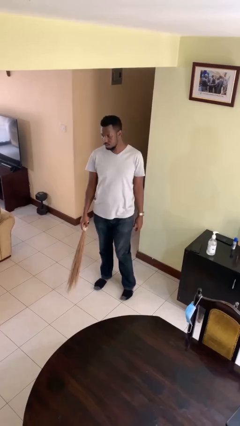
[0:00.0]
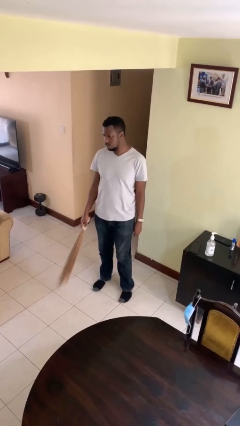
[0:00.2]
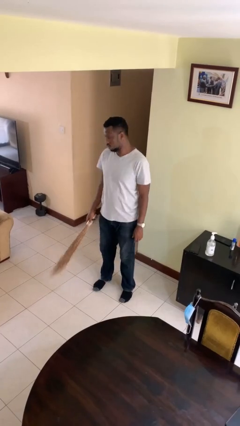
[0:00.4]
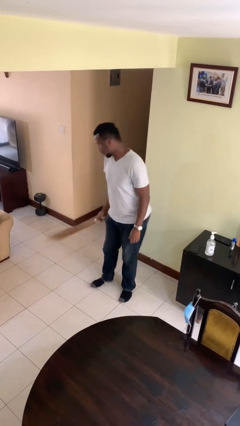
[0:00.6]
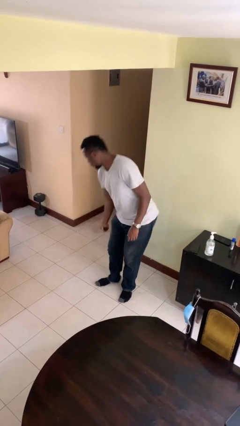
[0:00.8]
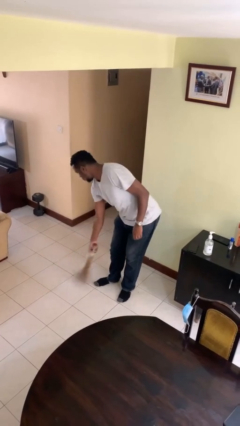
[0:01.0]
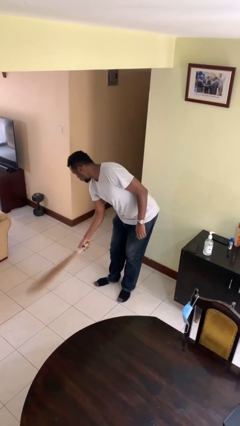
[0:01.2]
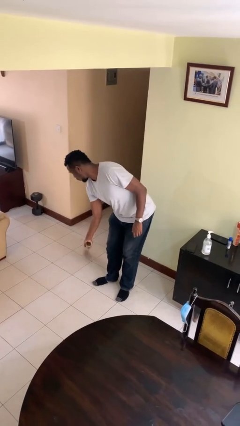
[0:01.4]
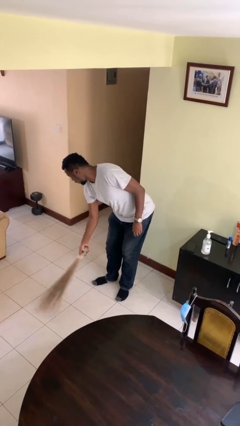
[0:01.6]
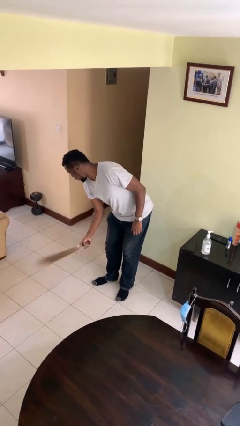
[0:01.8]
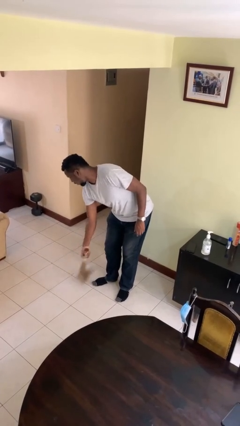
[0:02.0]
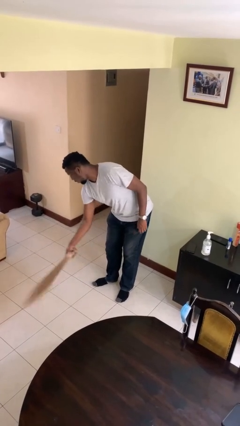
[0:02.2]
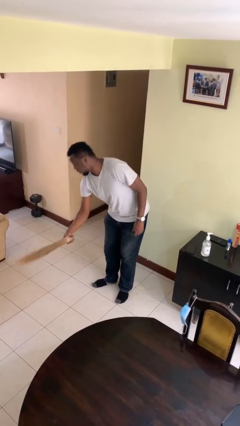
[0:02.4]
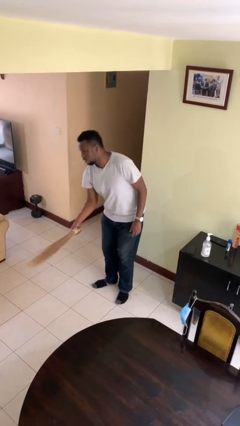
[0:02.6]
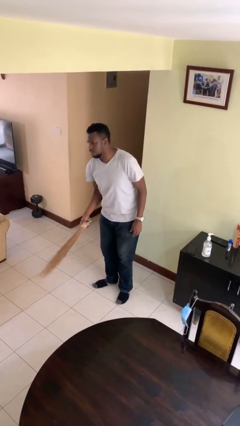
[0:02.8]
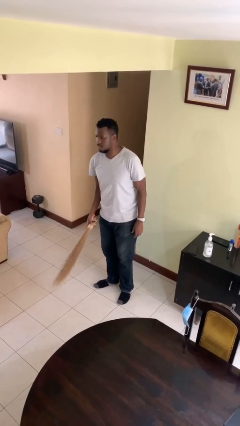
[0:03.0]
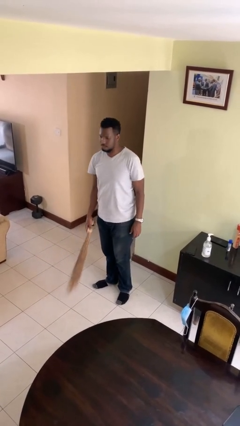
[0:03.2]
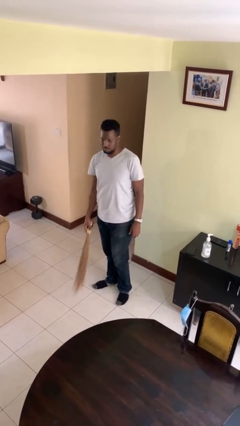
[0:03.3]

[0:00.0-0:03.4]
person sweeps floor

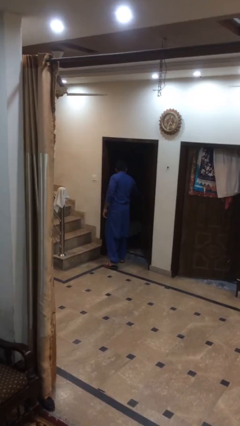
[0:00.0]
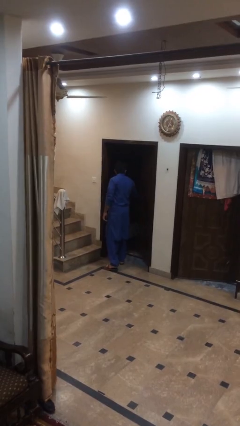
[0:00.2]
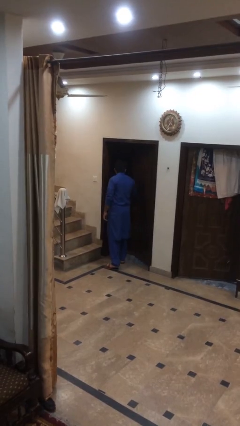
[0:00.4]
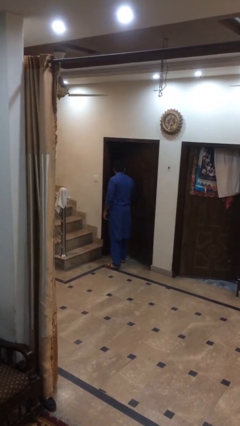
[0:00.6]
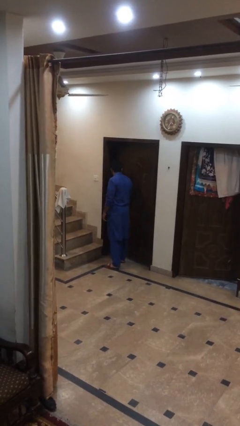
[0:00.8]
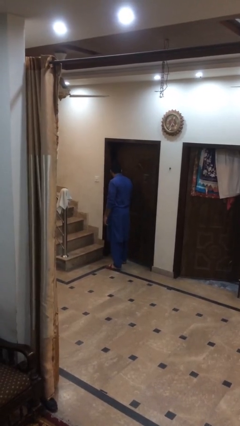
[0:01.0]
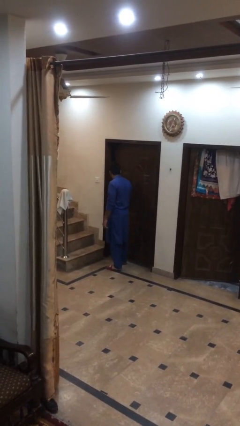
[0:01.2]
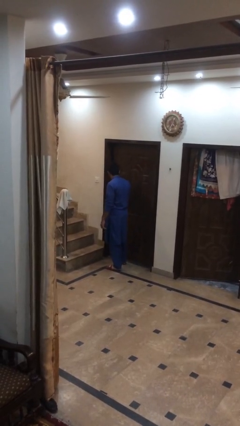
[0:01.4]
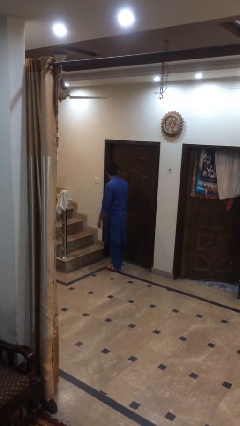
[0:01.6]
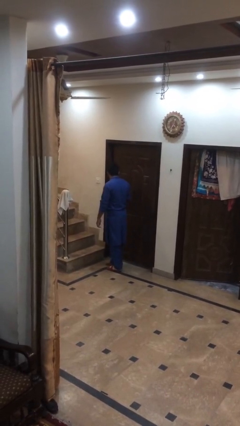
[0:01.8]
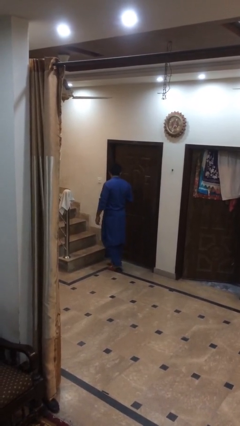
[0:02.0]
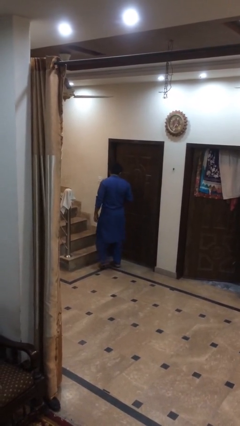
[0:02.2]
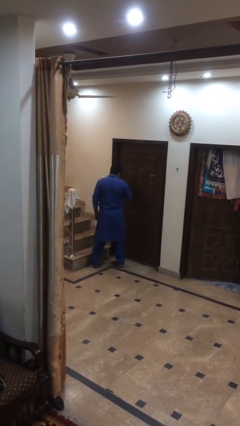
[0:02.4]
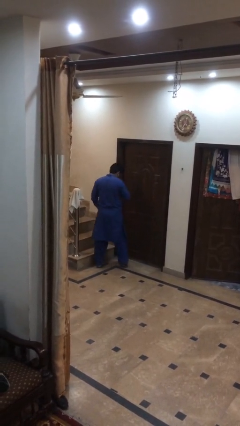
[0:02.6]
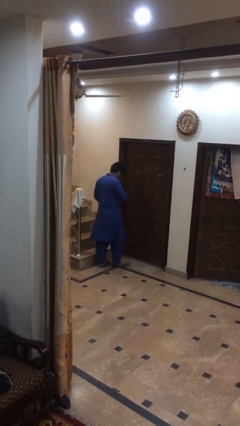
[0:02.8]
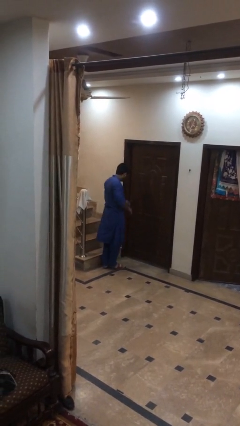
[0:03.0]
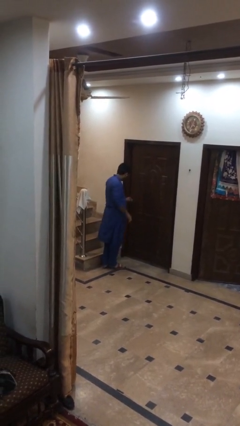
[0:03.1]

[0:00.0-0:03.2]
person closes facility door

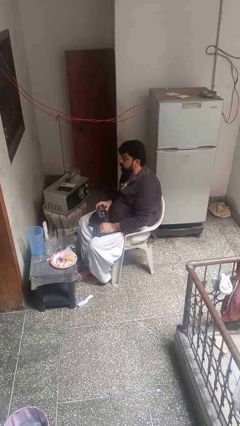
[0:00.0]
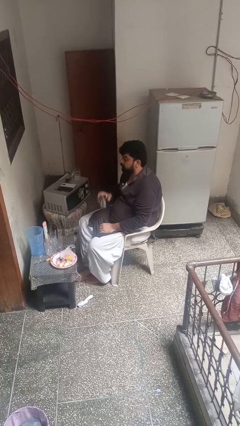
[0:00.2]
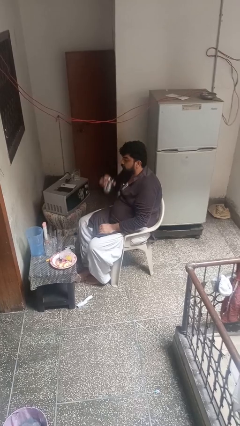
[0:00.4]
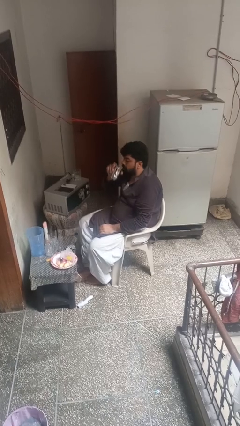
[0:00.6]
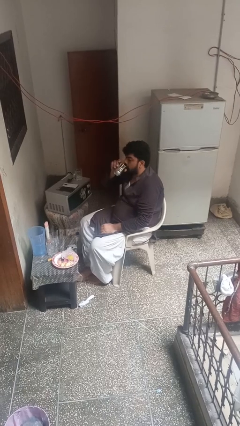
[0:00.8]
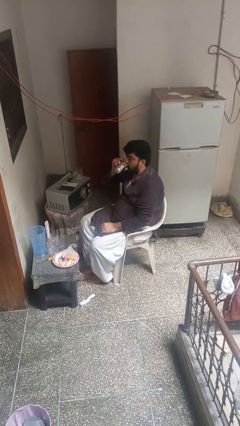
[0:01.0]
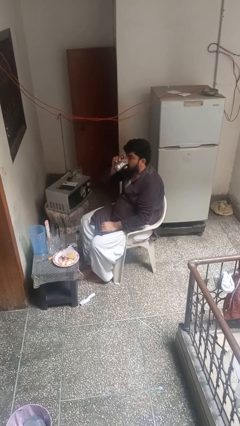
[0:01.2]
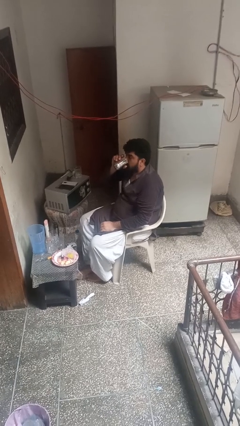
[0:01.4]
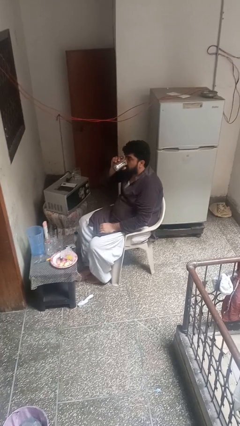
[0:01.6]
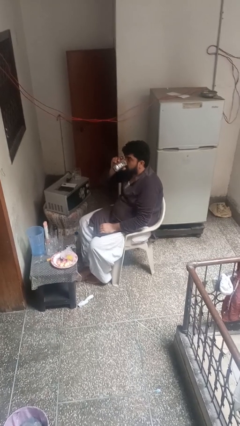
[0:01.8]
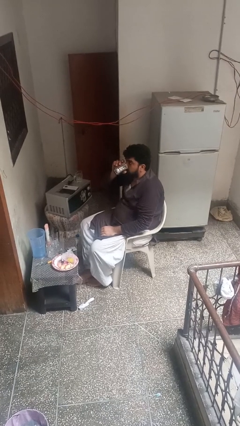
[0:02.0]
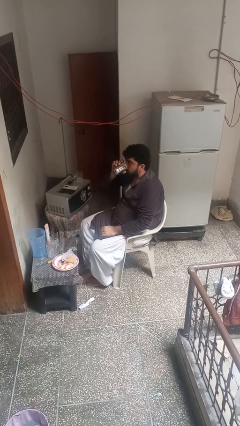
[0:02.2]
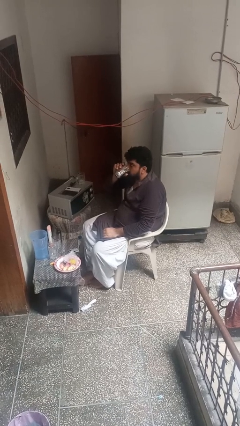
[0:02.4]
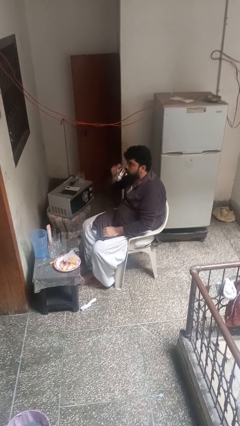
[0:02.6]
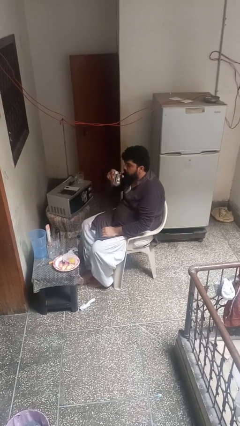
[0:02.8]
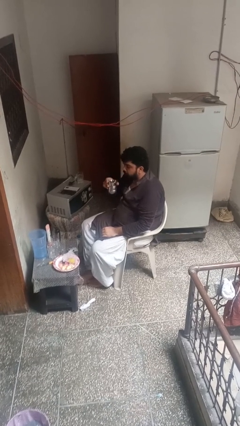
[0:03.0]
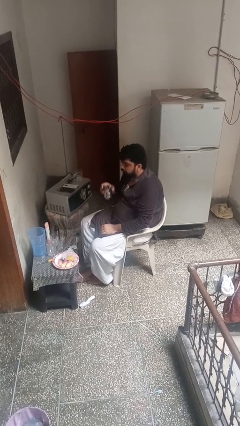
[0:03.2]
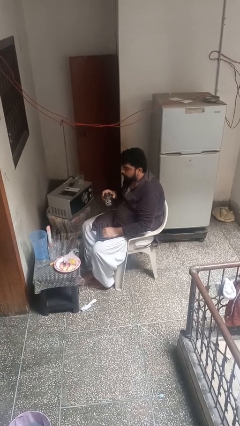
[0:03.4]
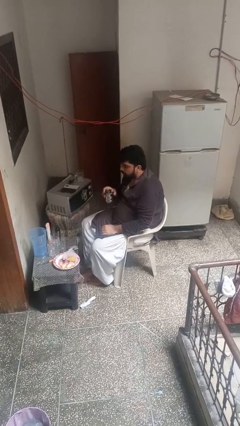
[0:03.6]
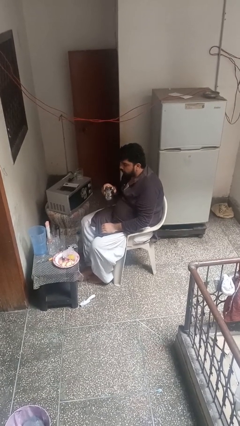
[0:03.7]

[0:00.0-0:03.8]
person drinks from cup

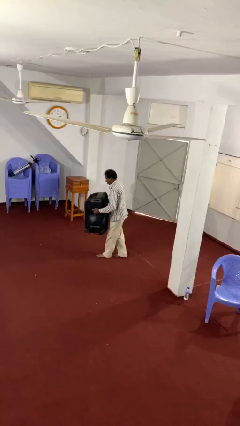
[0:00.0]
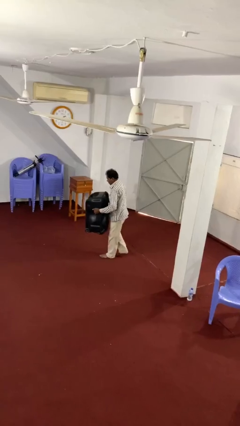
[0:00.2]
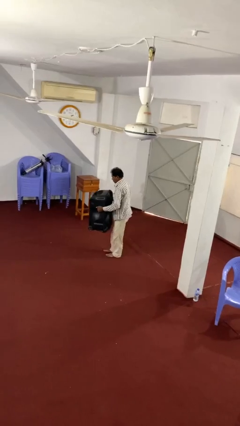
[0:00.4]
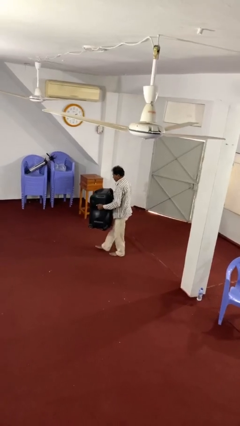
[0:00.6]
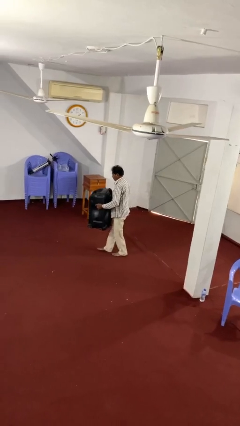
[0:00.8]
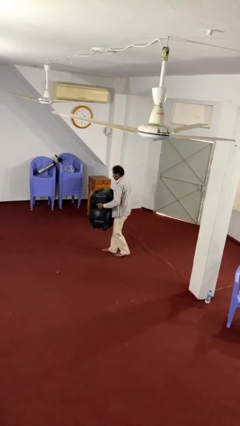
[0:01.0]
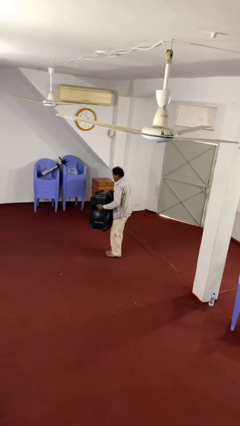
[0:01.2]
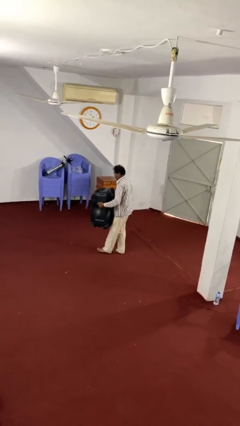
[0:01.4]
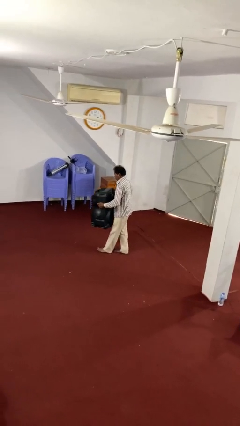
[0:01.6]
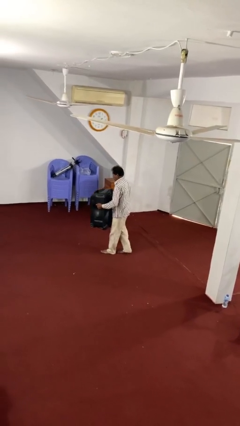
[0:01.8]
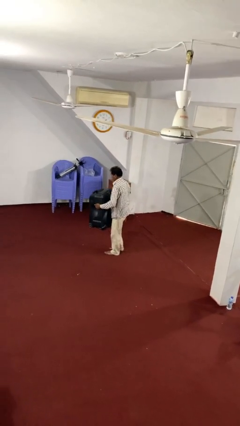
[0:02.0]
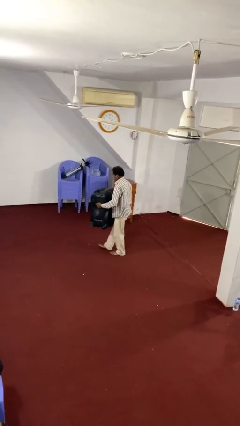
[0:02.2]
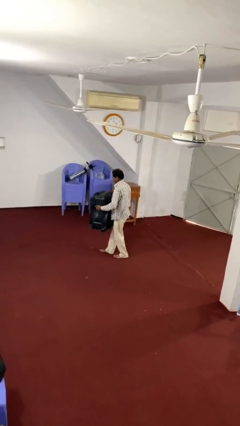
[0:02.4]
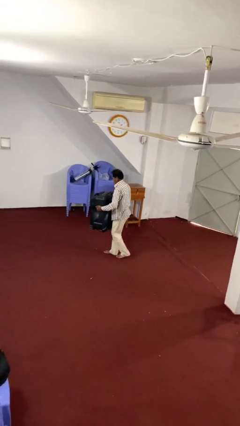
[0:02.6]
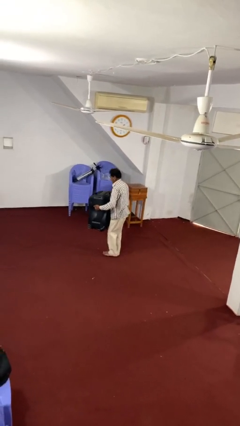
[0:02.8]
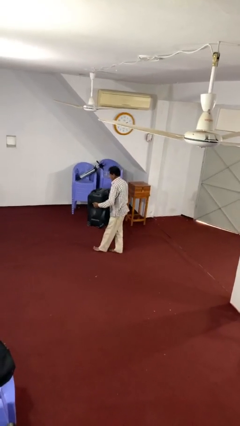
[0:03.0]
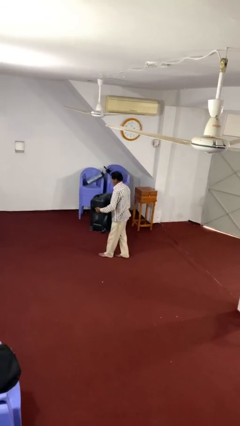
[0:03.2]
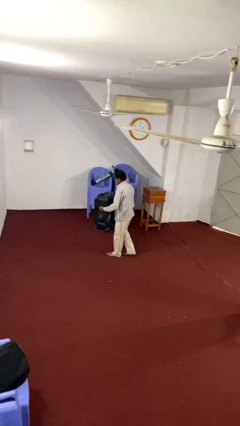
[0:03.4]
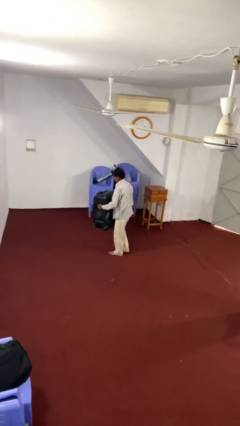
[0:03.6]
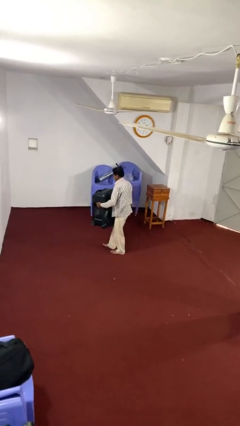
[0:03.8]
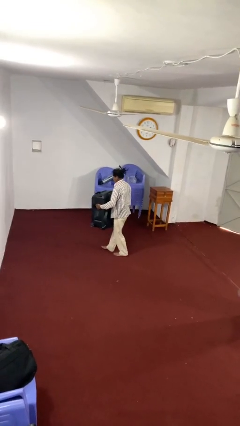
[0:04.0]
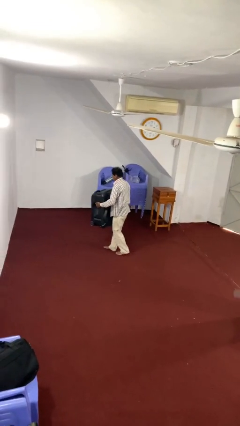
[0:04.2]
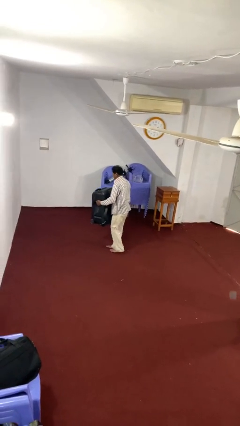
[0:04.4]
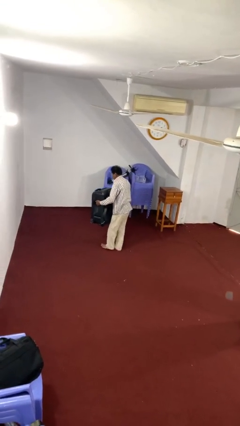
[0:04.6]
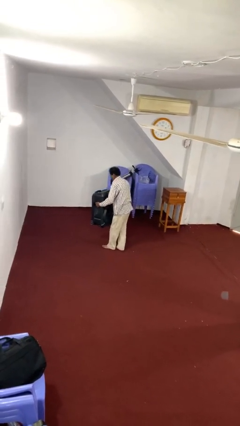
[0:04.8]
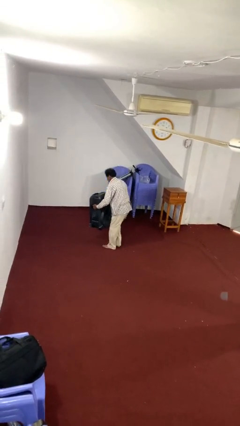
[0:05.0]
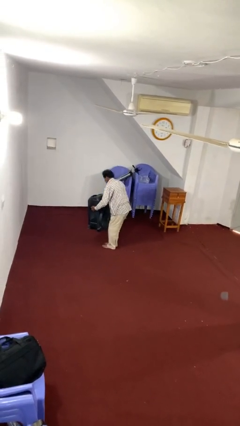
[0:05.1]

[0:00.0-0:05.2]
person carries heavy object

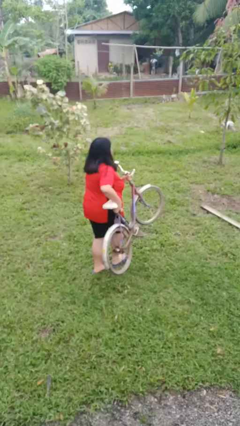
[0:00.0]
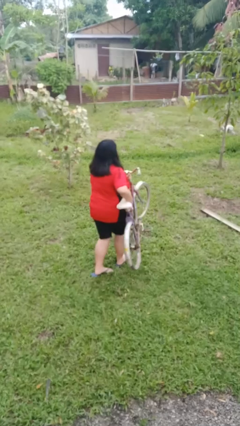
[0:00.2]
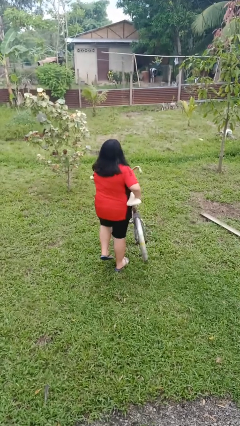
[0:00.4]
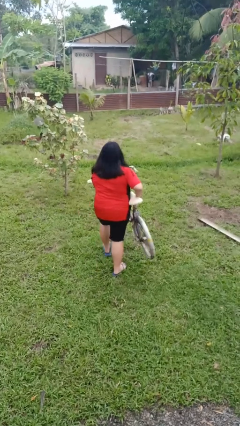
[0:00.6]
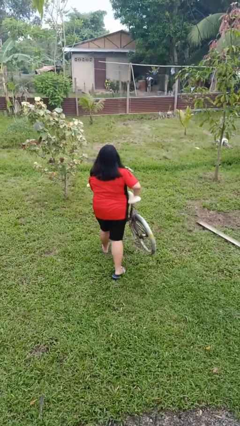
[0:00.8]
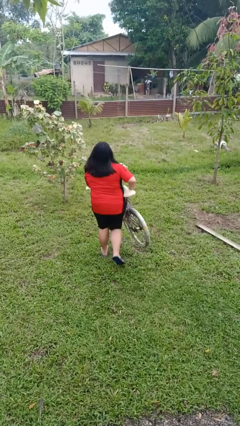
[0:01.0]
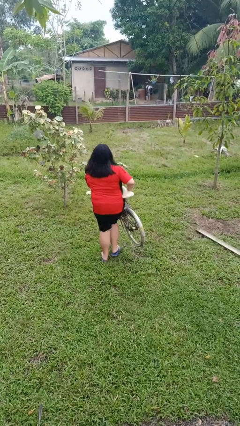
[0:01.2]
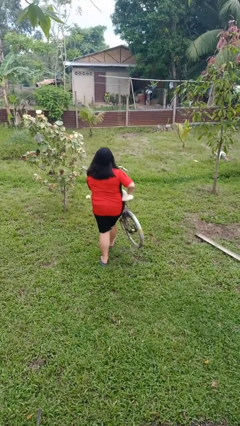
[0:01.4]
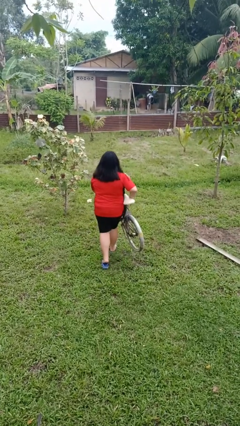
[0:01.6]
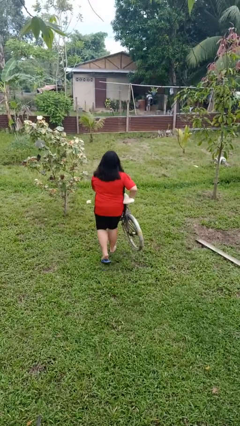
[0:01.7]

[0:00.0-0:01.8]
person carries bicycle

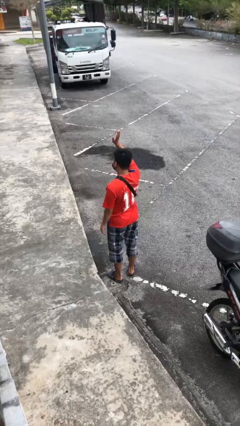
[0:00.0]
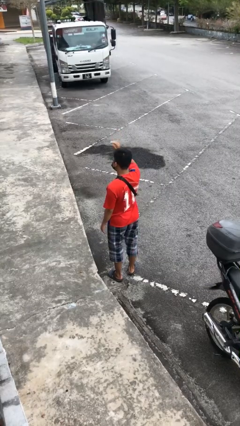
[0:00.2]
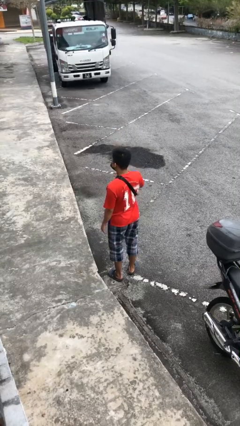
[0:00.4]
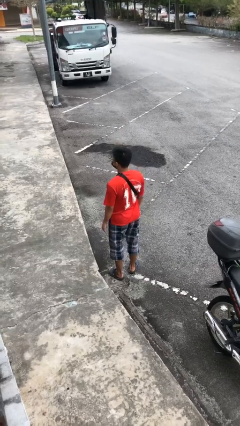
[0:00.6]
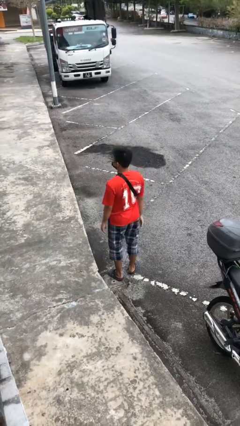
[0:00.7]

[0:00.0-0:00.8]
person gestures lower hand
